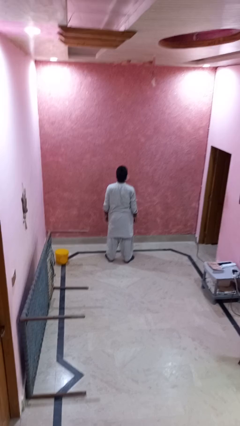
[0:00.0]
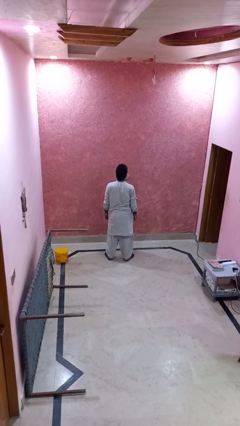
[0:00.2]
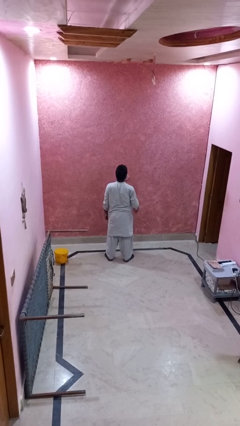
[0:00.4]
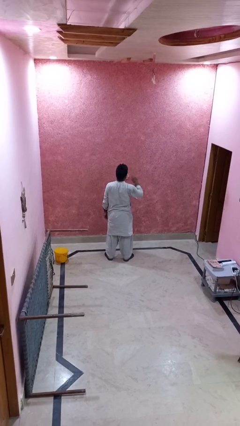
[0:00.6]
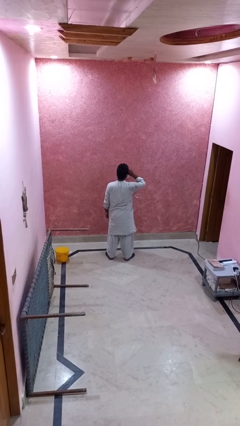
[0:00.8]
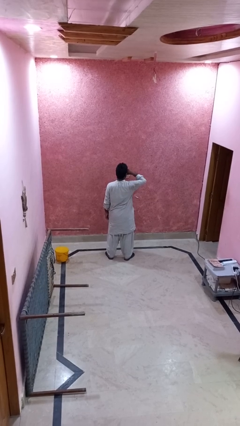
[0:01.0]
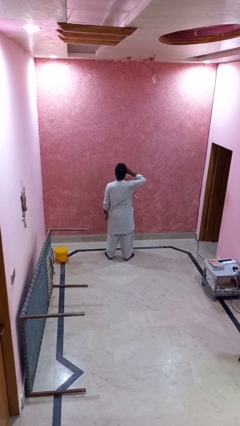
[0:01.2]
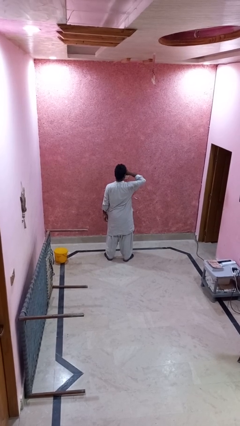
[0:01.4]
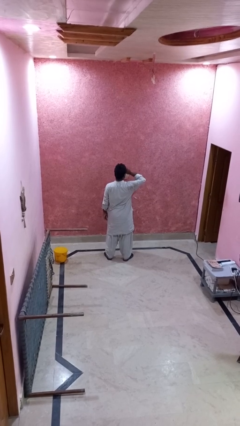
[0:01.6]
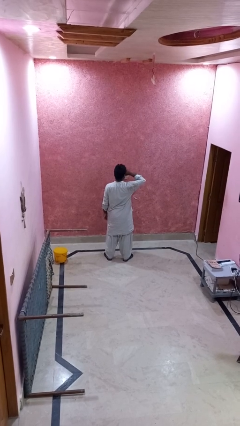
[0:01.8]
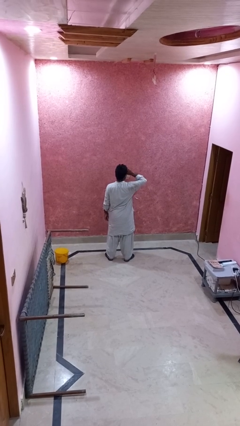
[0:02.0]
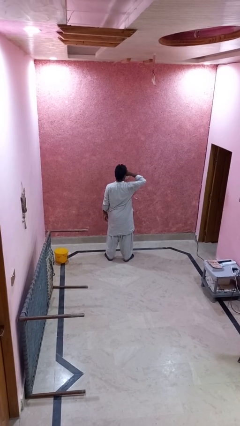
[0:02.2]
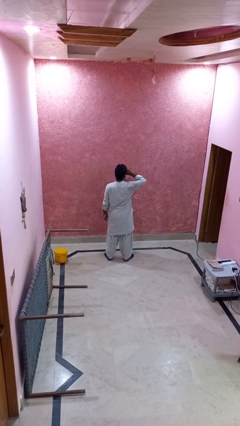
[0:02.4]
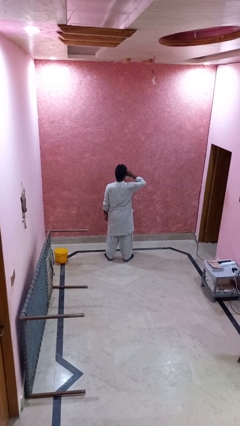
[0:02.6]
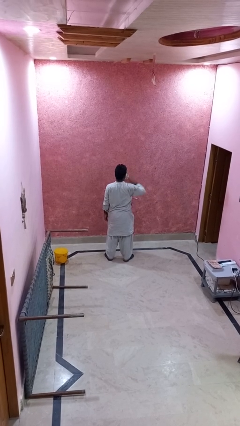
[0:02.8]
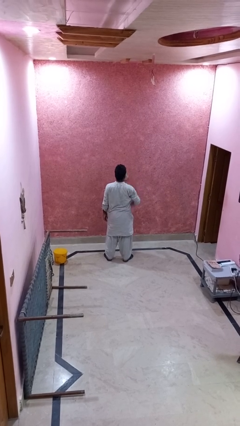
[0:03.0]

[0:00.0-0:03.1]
person rubs eyes

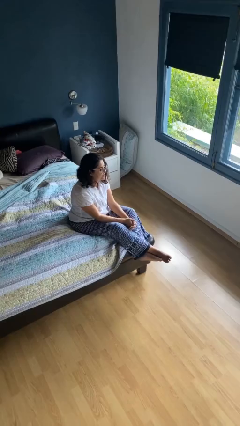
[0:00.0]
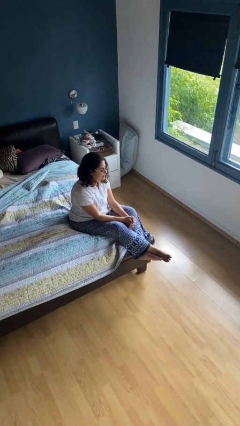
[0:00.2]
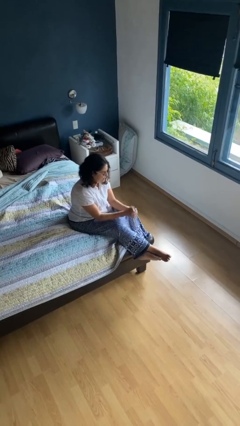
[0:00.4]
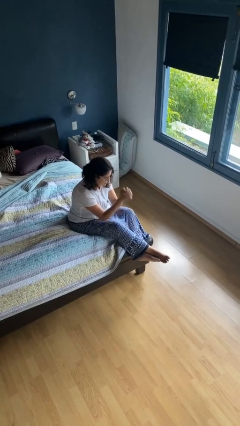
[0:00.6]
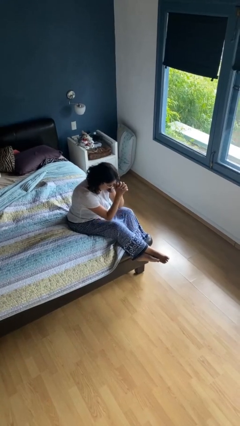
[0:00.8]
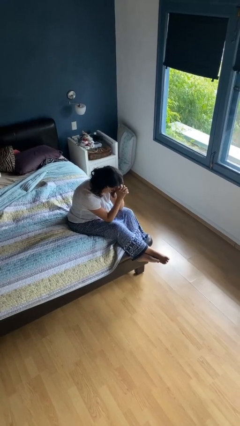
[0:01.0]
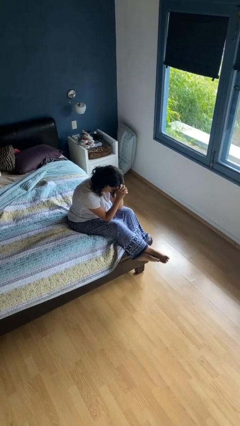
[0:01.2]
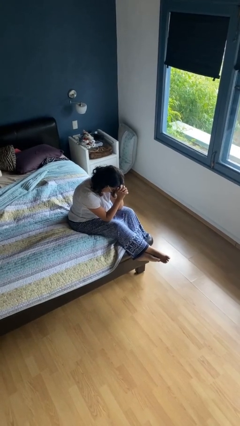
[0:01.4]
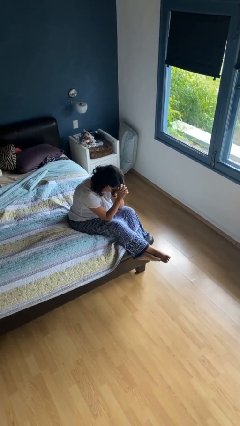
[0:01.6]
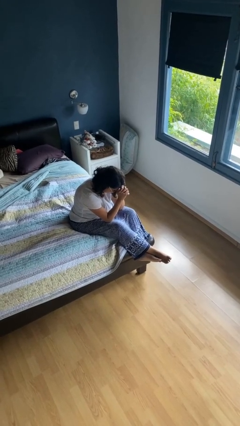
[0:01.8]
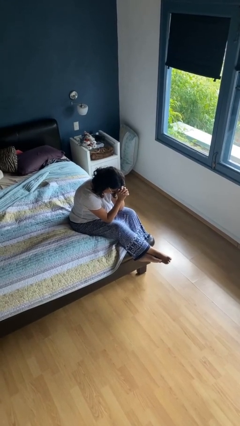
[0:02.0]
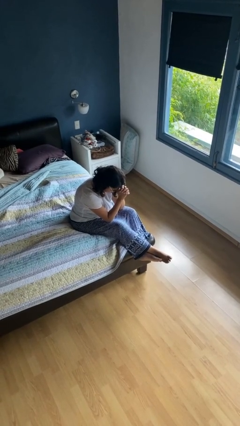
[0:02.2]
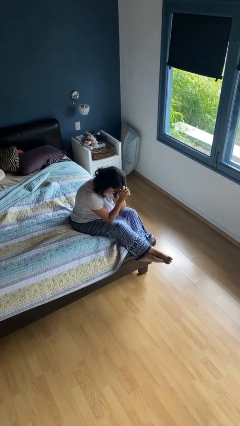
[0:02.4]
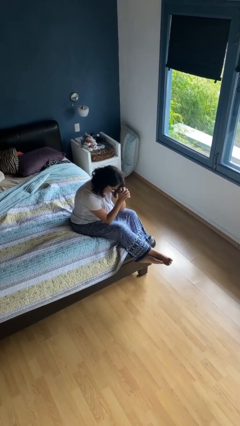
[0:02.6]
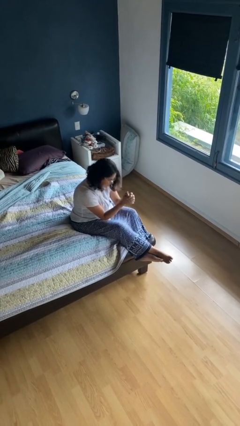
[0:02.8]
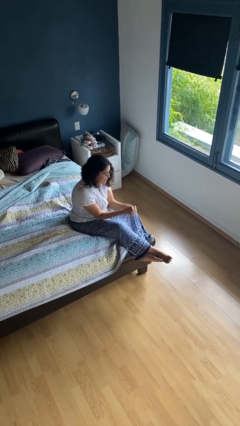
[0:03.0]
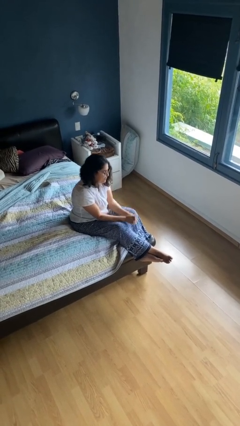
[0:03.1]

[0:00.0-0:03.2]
person prays

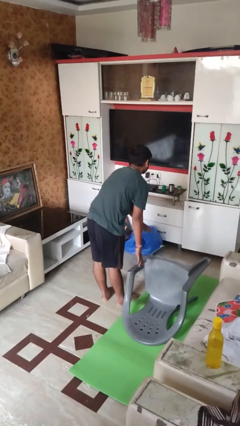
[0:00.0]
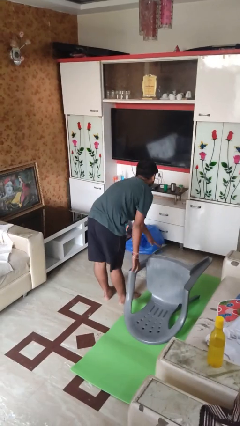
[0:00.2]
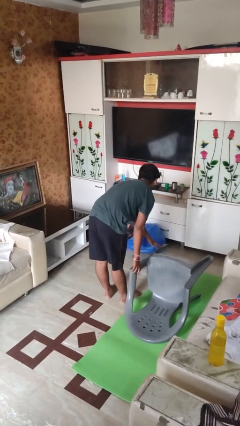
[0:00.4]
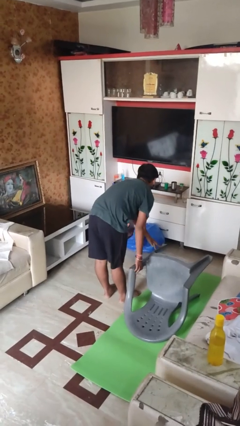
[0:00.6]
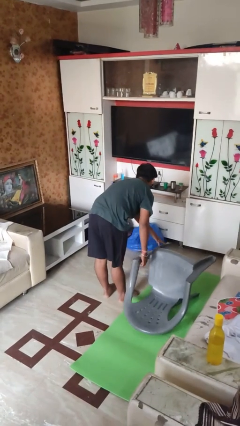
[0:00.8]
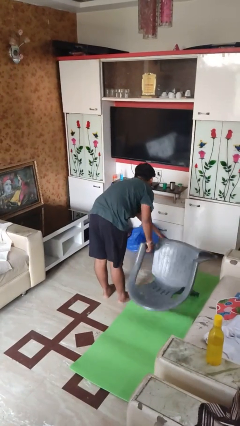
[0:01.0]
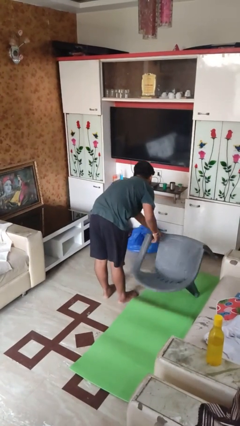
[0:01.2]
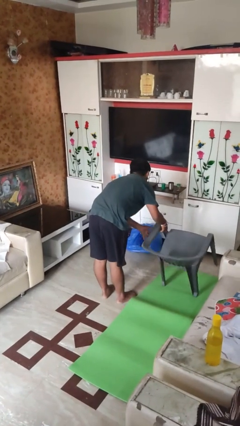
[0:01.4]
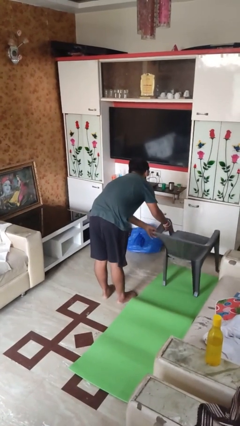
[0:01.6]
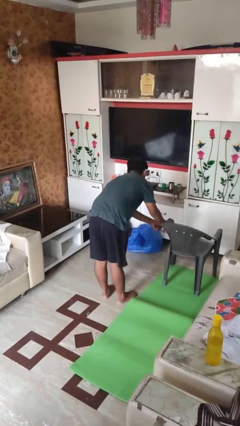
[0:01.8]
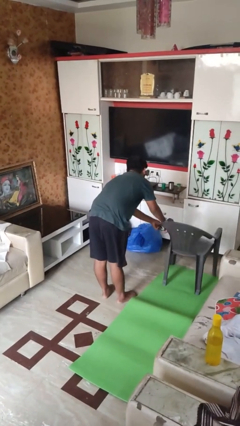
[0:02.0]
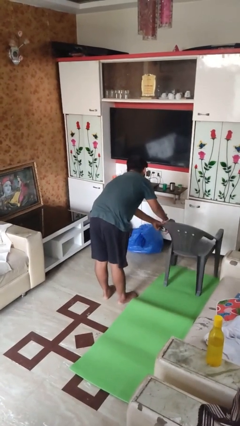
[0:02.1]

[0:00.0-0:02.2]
person sets upright furniture

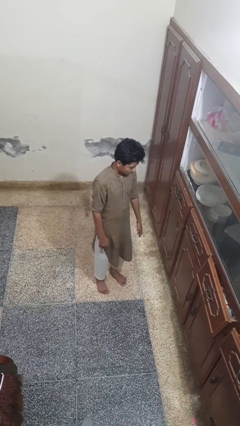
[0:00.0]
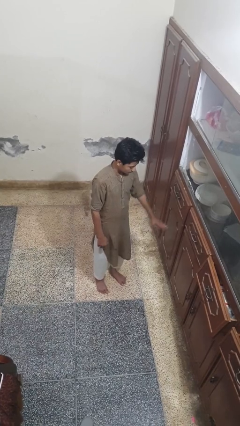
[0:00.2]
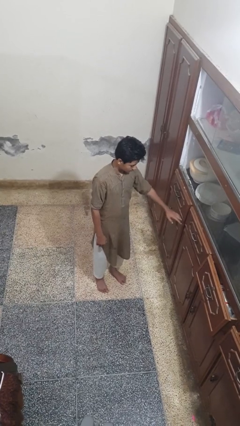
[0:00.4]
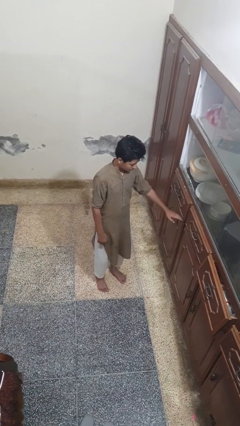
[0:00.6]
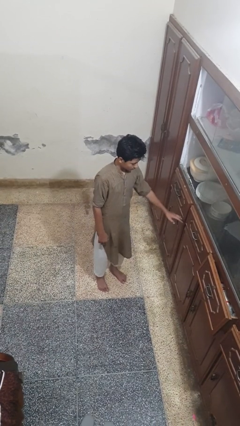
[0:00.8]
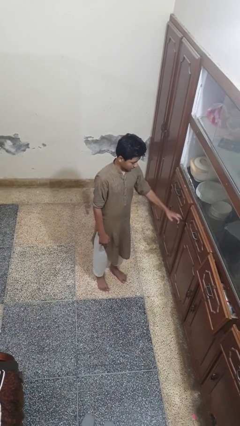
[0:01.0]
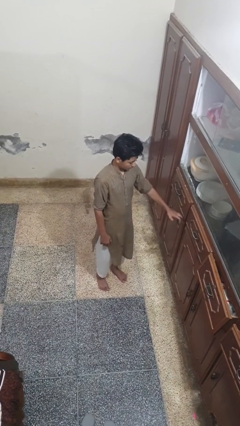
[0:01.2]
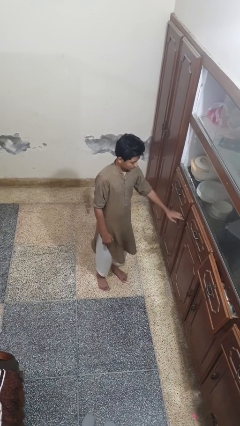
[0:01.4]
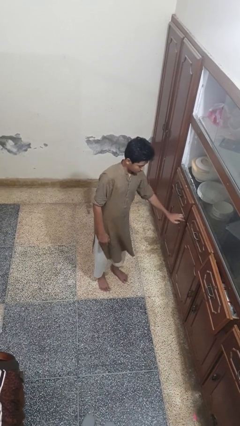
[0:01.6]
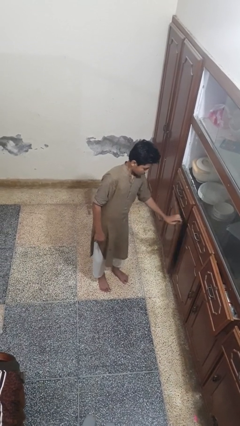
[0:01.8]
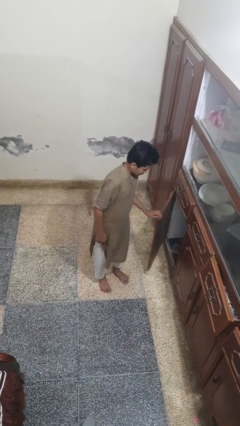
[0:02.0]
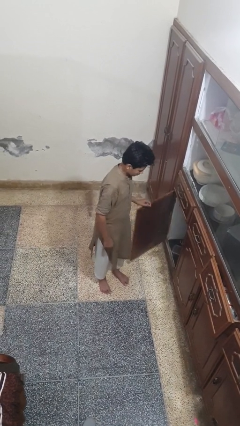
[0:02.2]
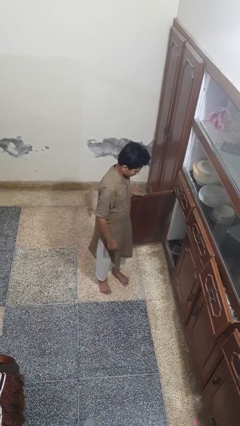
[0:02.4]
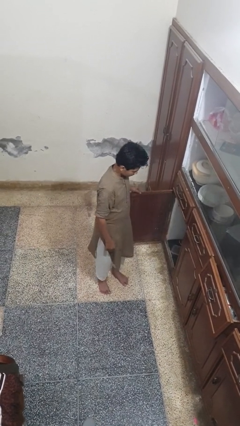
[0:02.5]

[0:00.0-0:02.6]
person opens cabinet

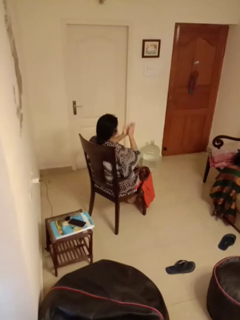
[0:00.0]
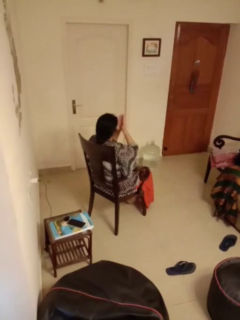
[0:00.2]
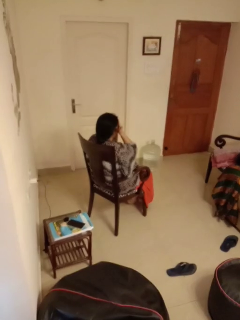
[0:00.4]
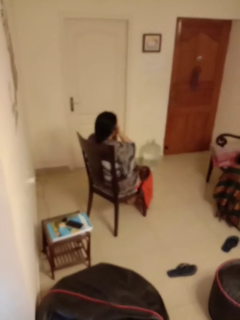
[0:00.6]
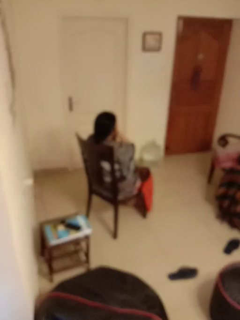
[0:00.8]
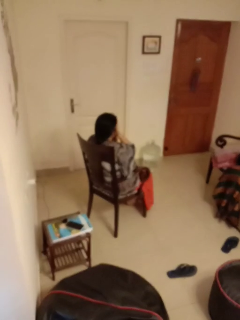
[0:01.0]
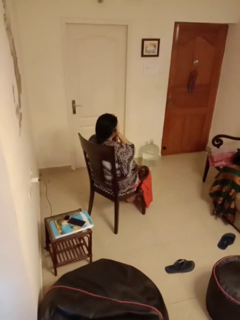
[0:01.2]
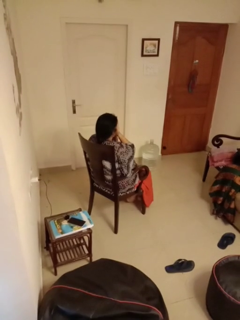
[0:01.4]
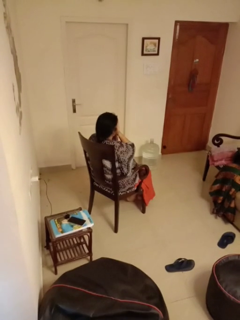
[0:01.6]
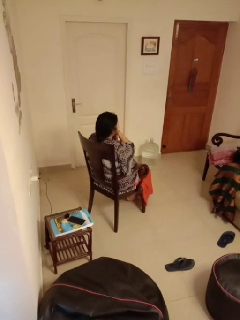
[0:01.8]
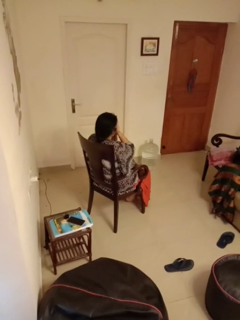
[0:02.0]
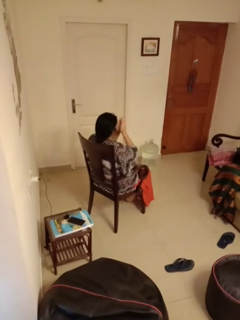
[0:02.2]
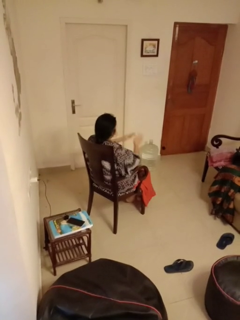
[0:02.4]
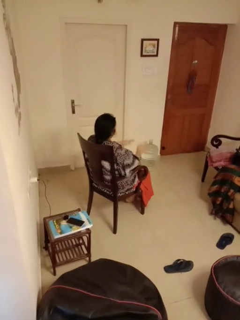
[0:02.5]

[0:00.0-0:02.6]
person covers face with hands

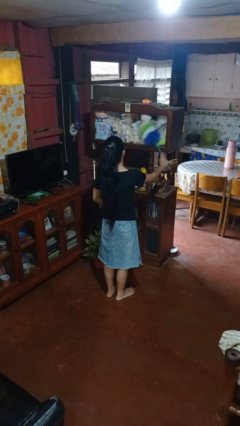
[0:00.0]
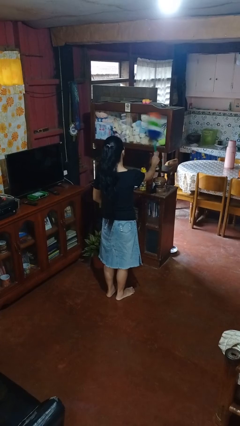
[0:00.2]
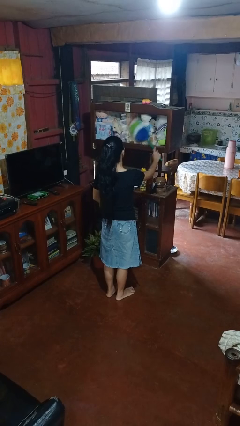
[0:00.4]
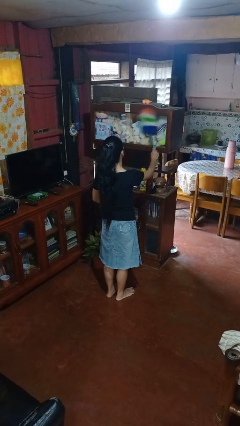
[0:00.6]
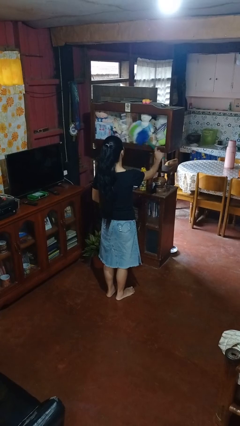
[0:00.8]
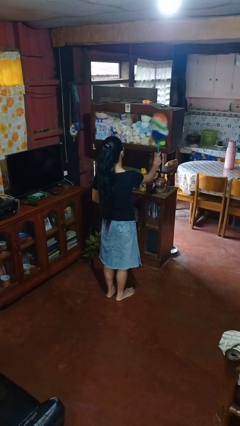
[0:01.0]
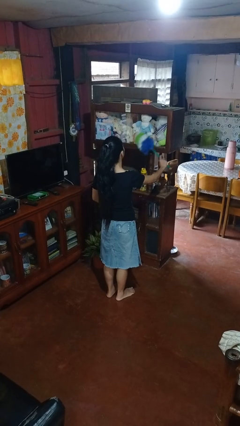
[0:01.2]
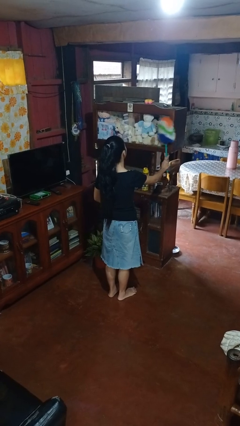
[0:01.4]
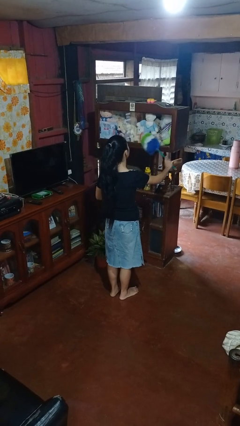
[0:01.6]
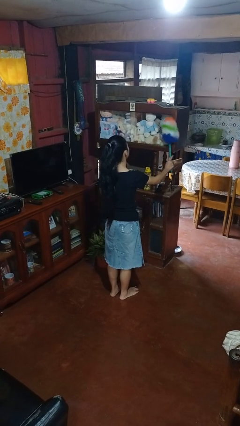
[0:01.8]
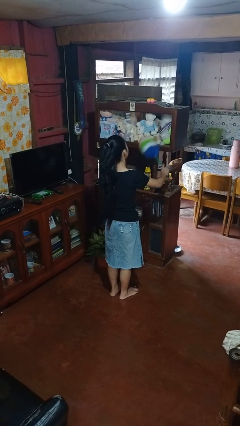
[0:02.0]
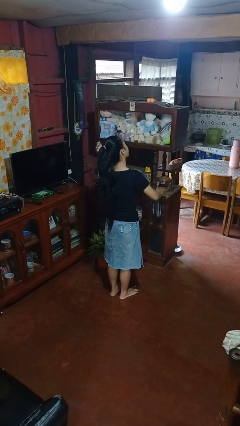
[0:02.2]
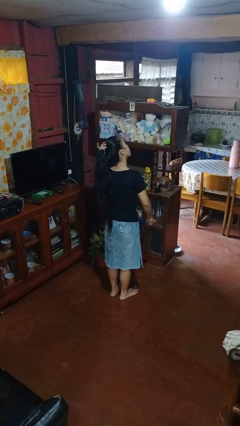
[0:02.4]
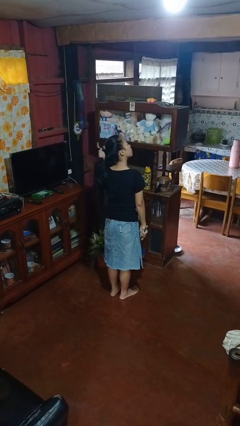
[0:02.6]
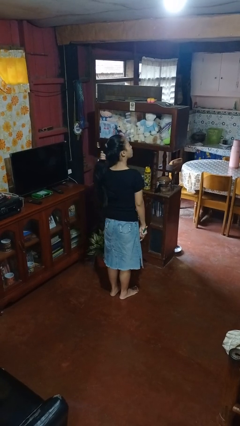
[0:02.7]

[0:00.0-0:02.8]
person dusts furniture

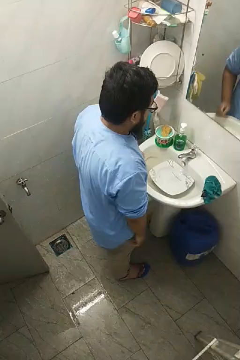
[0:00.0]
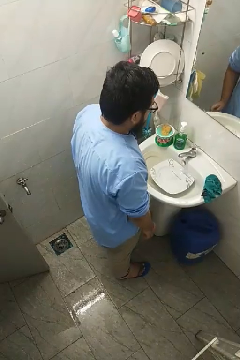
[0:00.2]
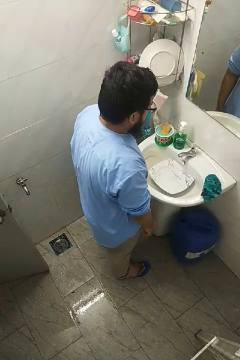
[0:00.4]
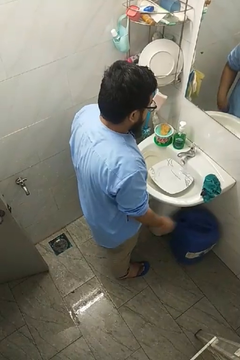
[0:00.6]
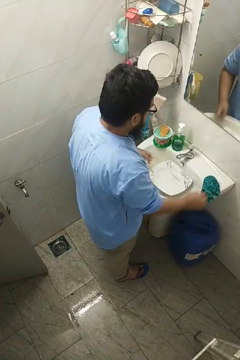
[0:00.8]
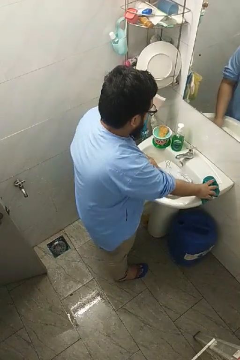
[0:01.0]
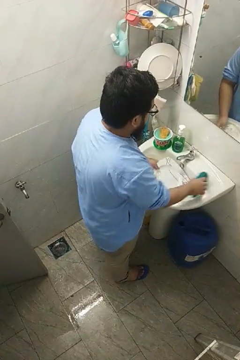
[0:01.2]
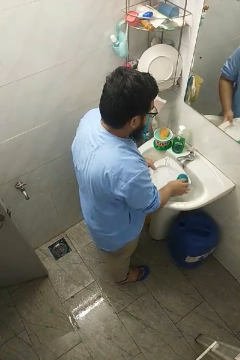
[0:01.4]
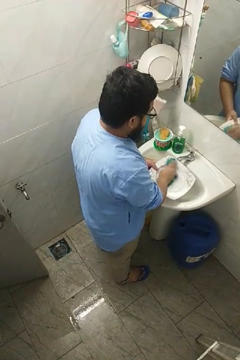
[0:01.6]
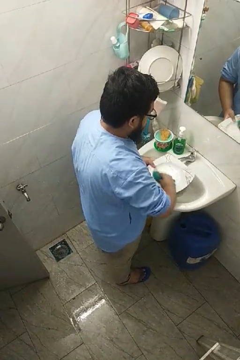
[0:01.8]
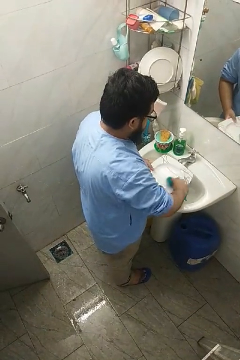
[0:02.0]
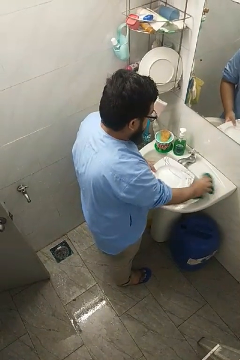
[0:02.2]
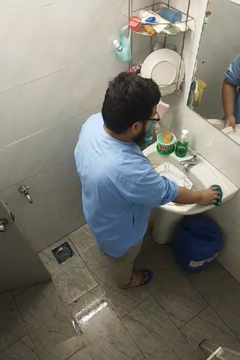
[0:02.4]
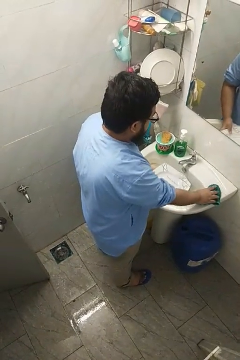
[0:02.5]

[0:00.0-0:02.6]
person dries dish
